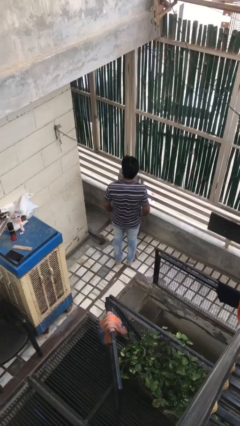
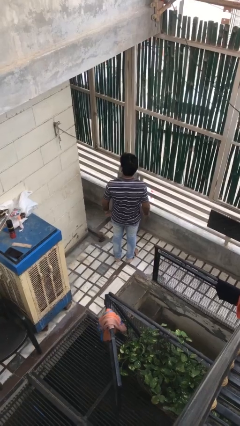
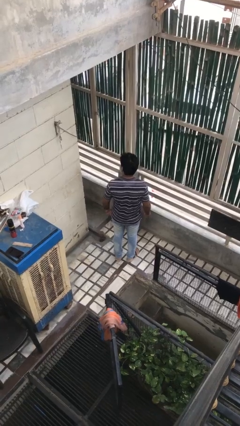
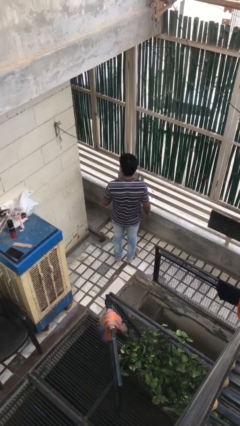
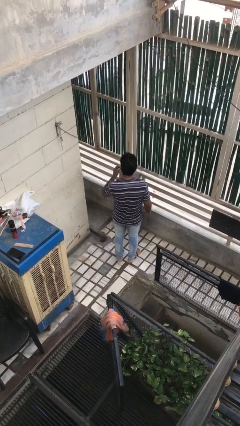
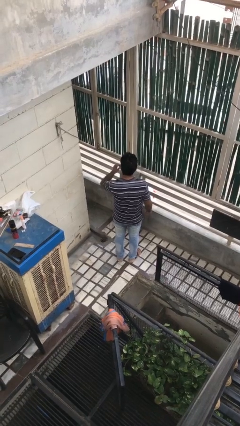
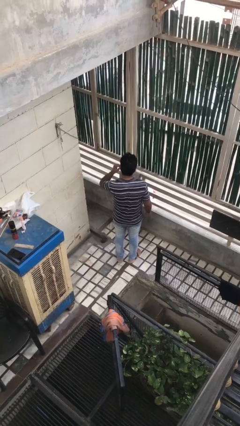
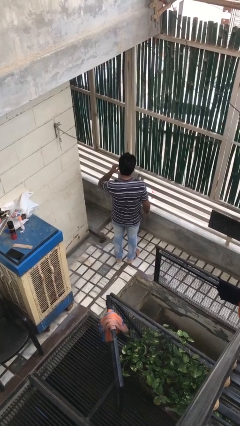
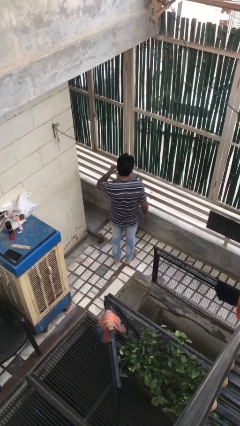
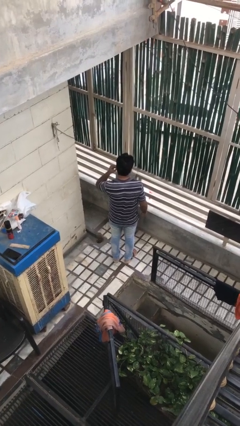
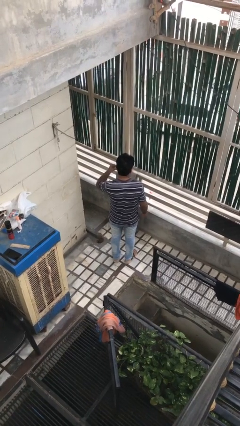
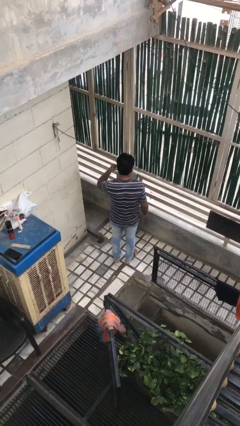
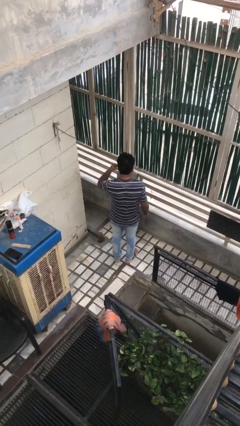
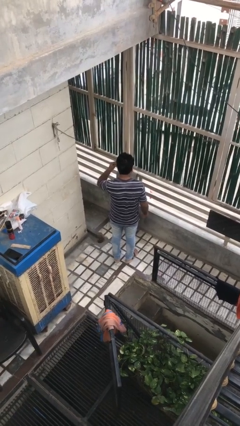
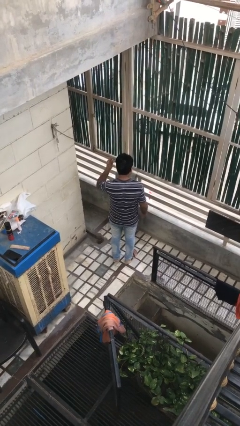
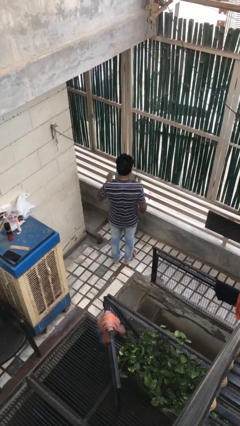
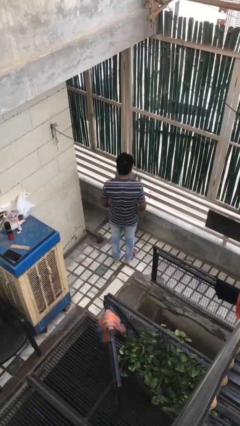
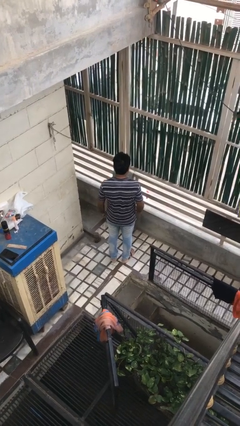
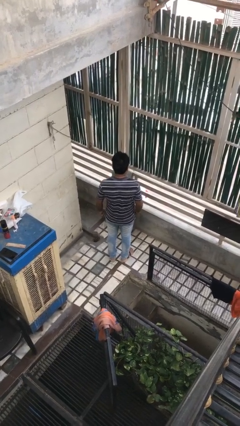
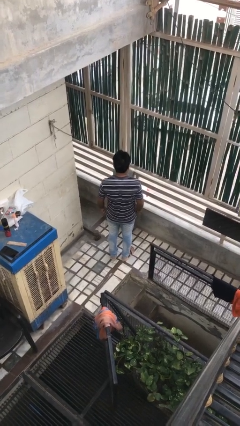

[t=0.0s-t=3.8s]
person takes off earrings

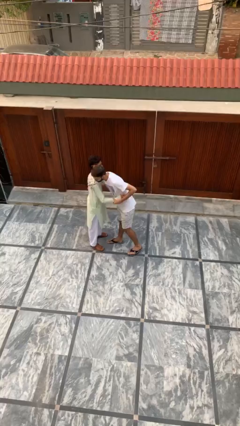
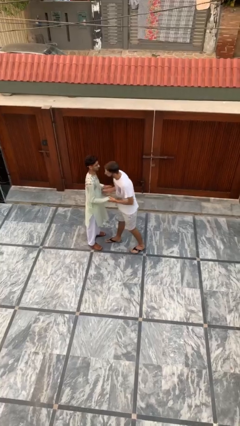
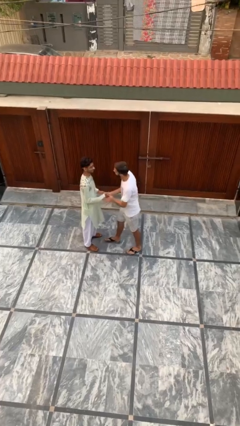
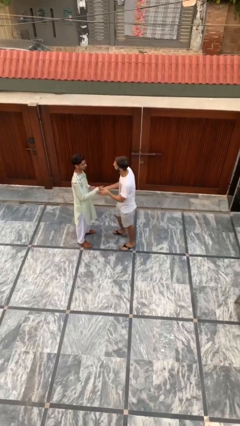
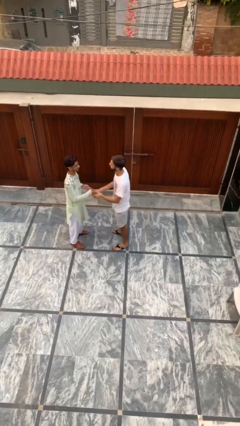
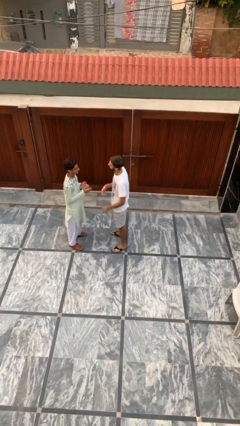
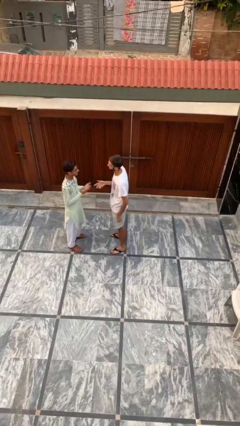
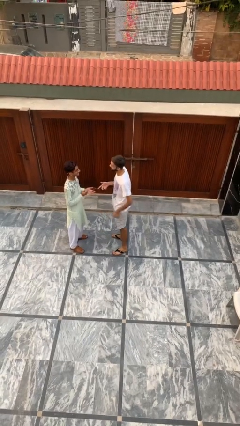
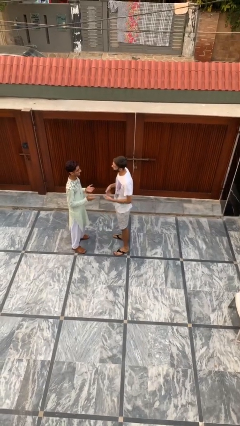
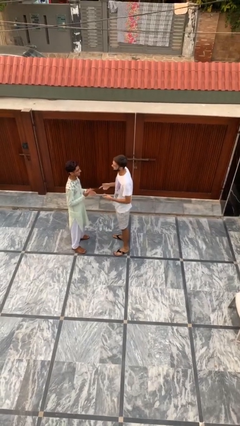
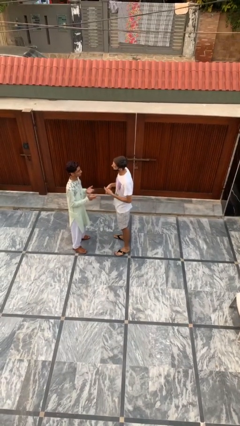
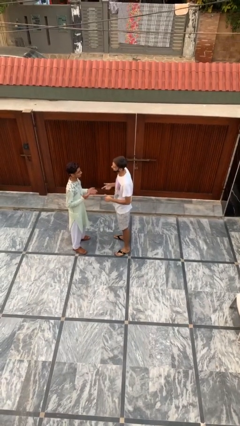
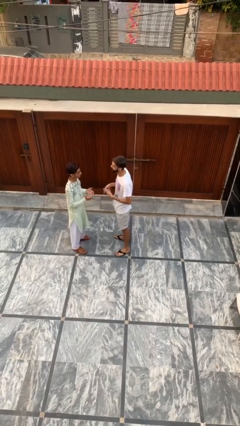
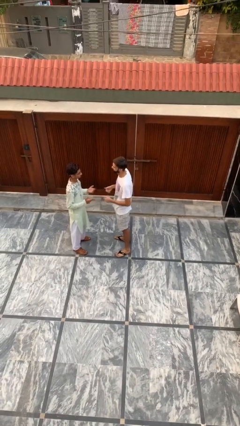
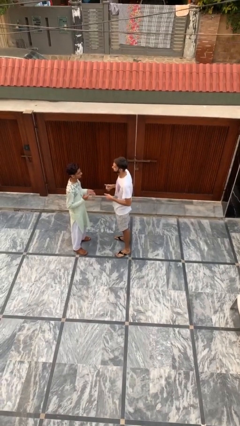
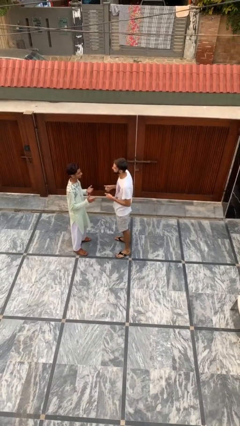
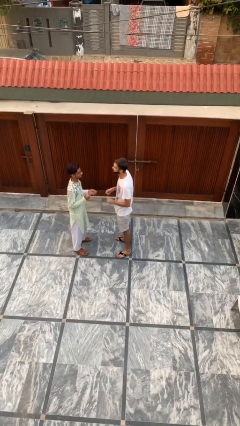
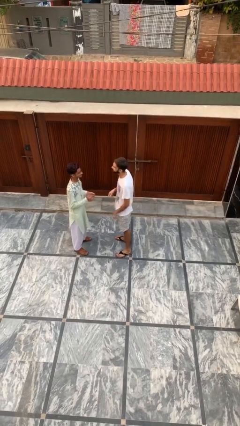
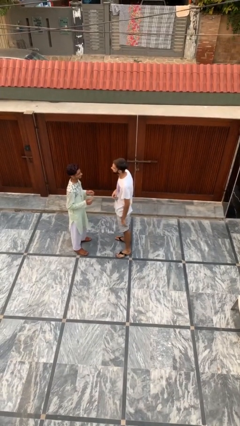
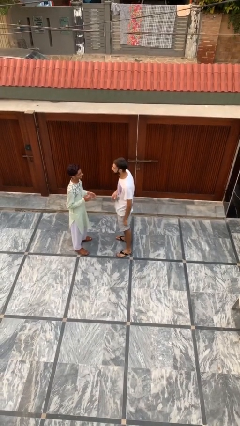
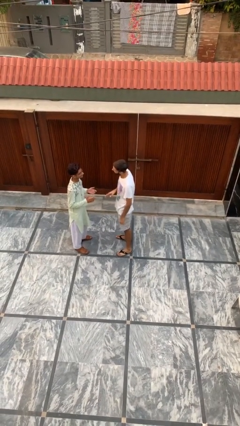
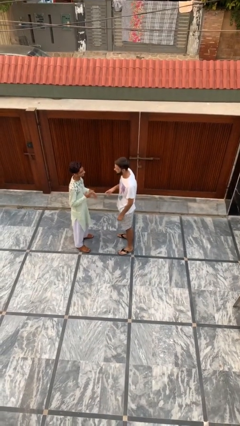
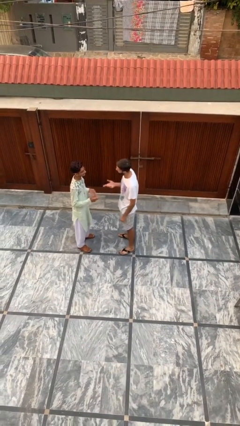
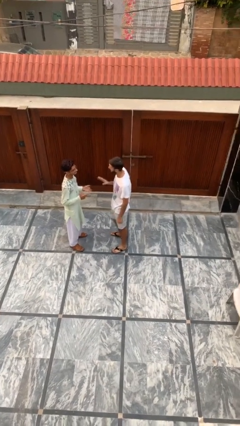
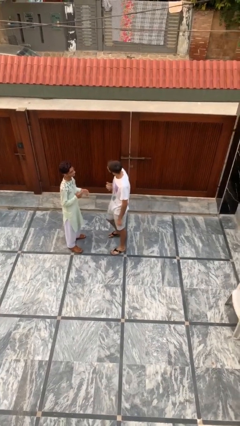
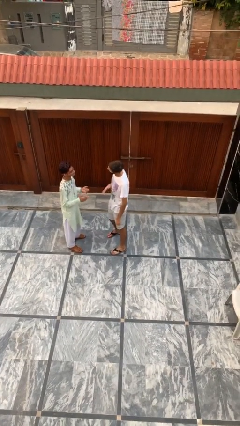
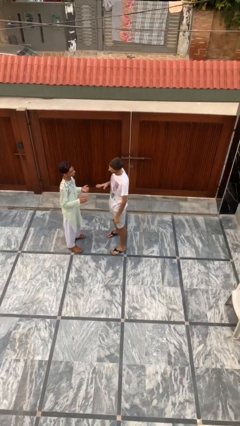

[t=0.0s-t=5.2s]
person talks to person

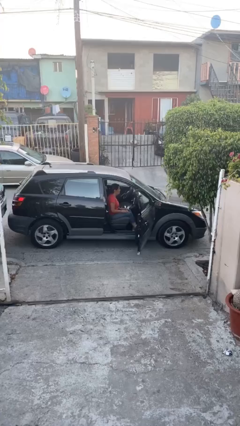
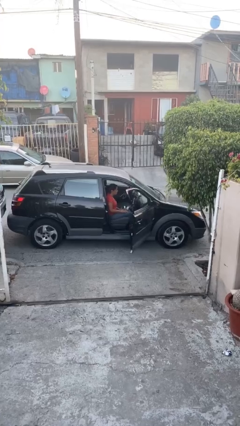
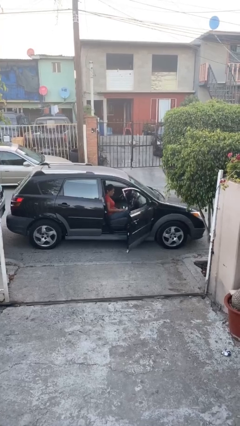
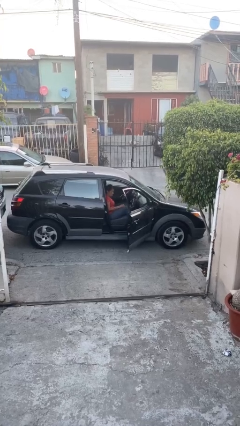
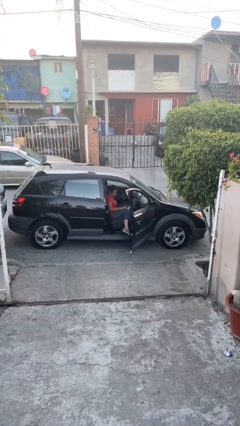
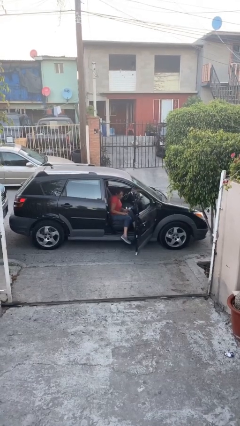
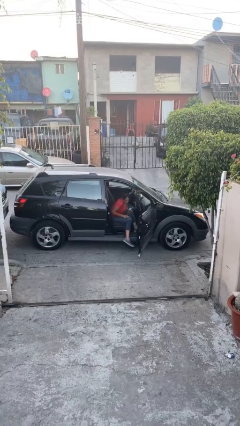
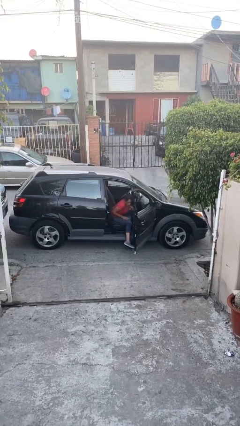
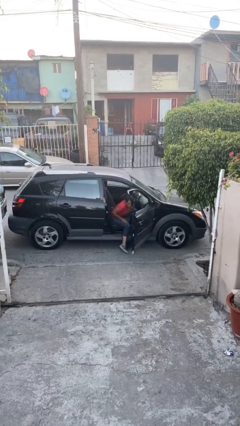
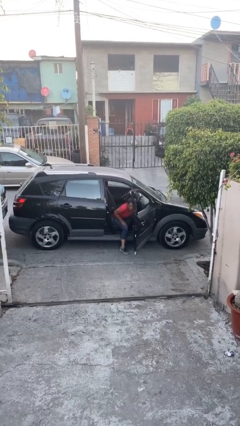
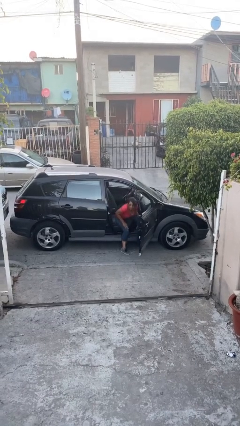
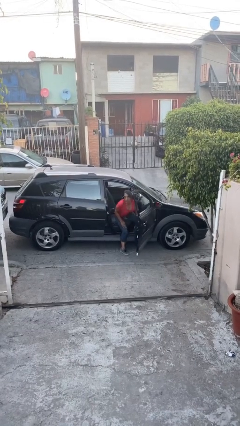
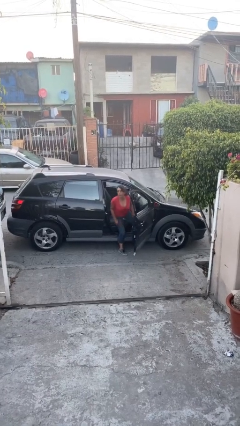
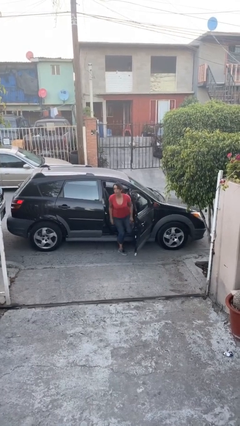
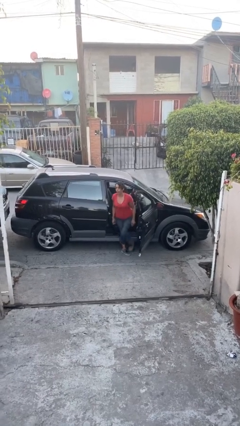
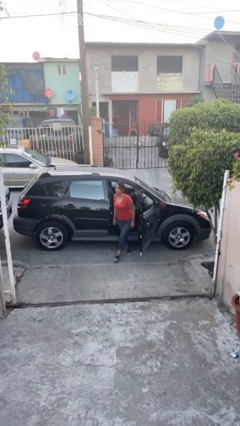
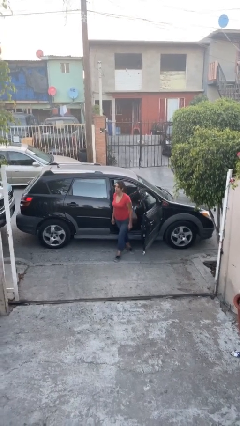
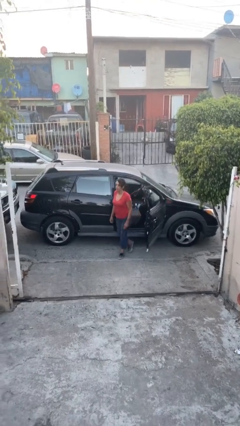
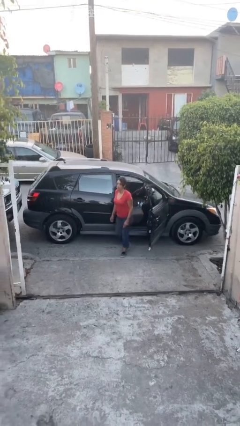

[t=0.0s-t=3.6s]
person exits car

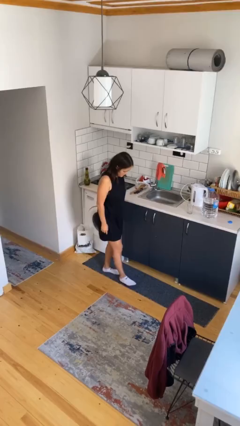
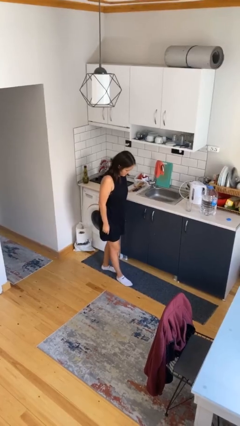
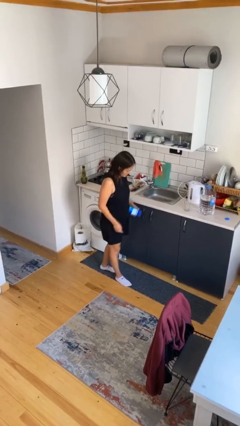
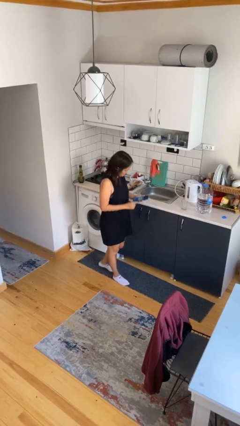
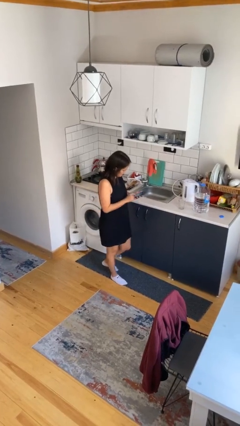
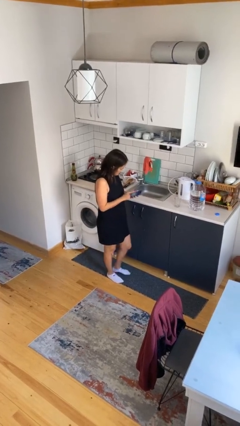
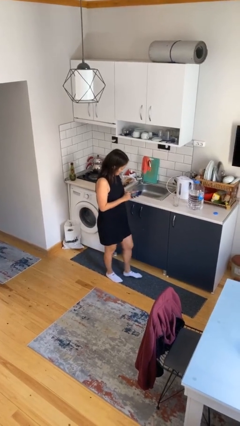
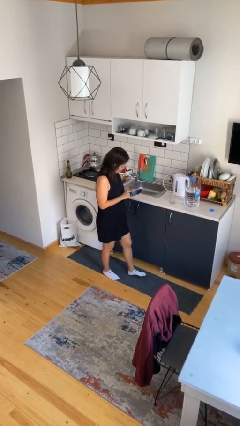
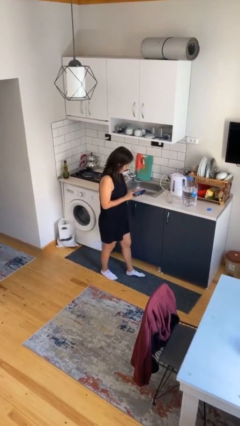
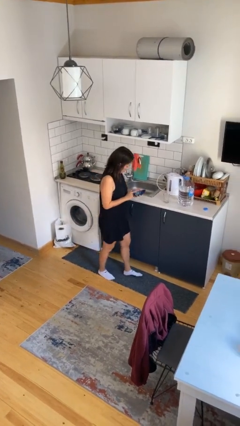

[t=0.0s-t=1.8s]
person takes phone from pocket

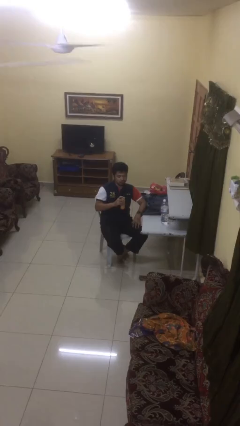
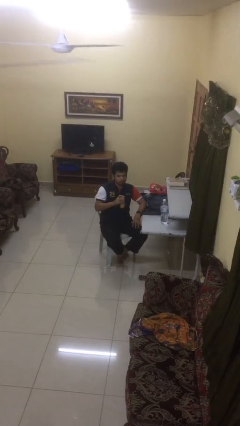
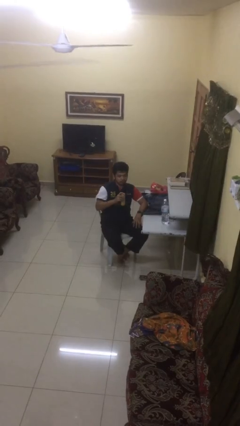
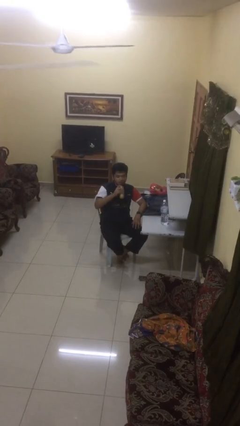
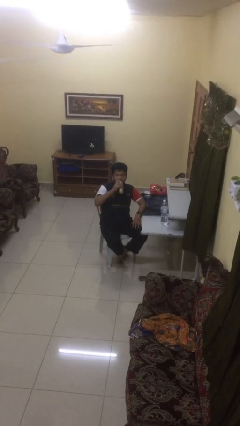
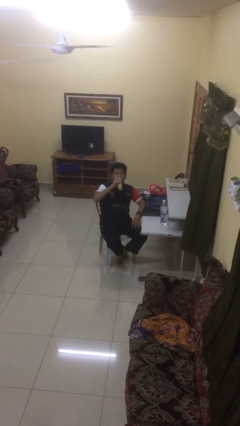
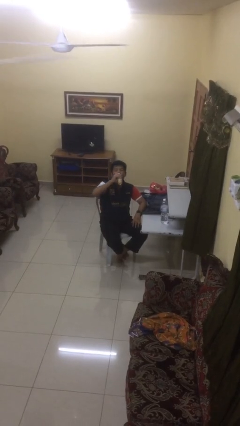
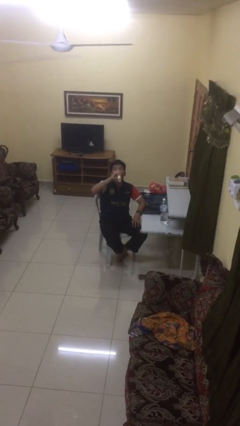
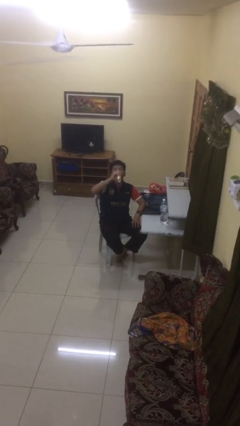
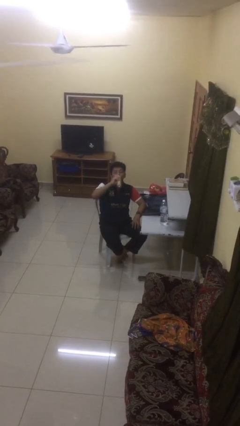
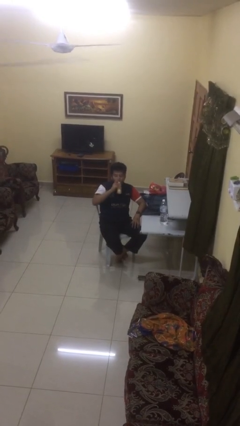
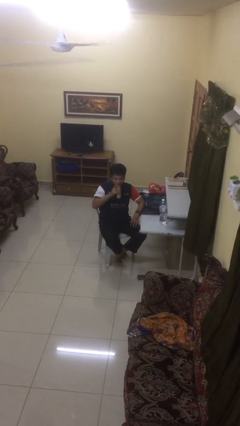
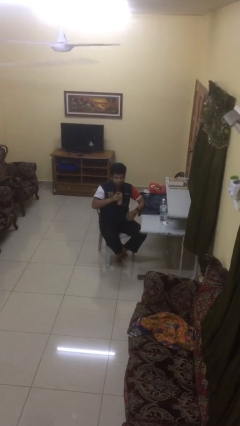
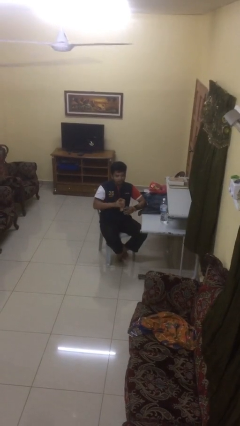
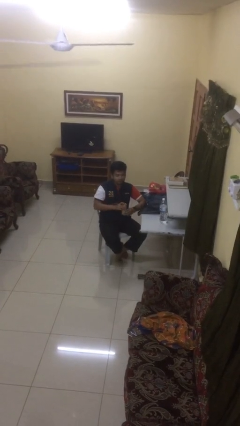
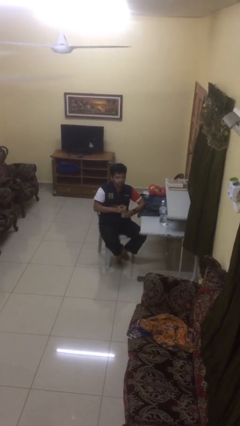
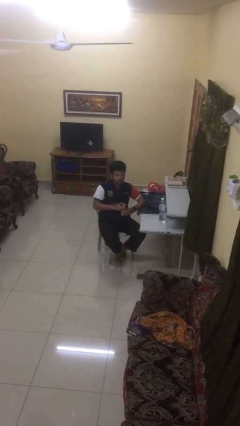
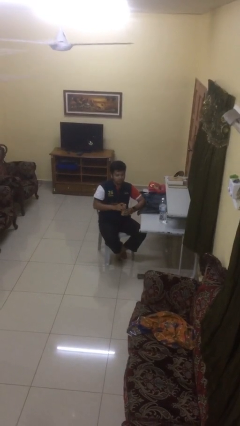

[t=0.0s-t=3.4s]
person drinks from beverage can
